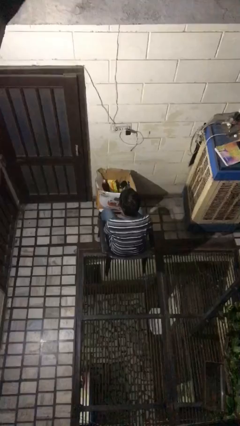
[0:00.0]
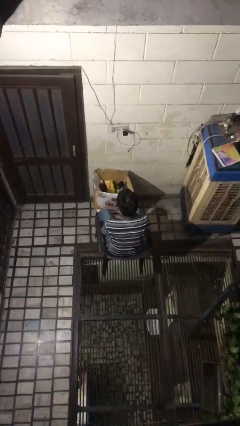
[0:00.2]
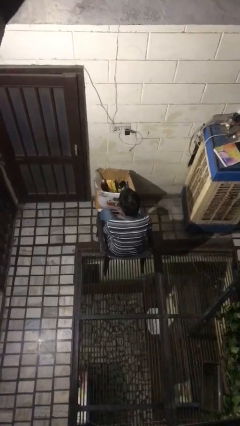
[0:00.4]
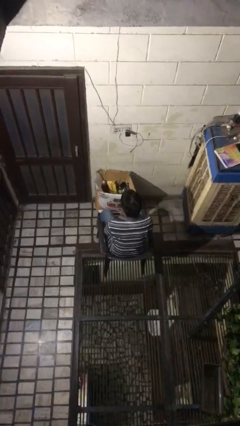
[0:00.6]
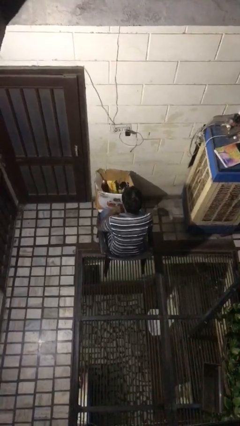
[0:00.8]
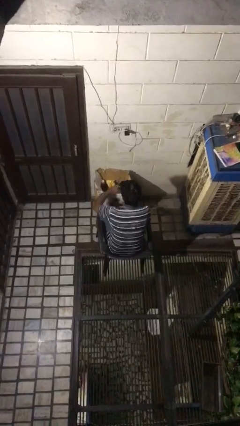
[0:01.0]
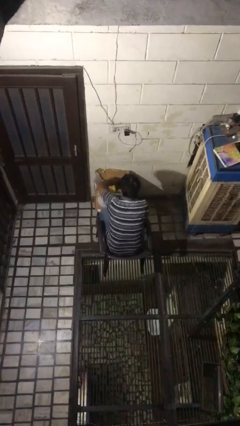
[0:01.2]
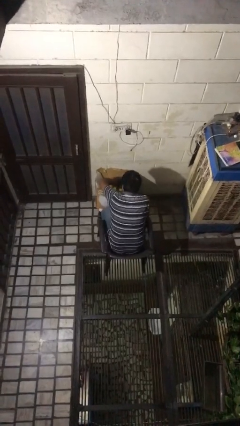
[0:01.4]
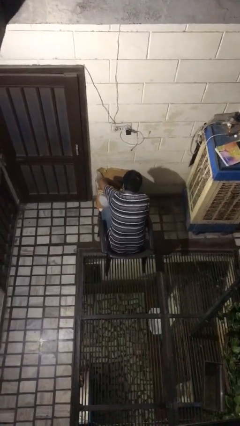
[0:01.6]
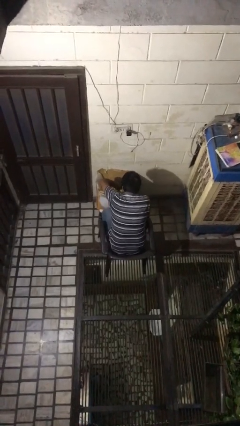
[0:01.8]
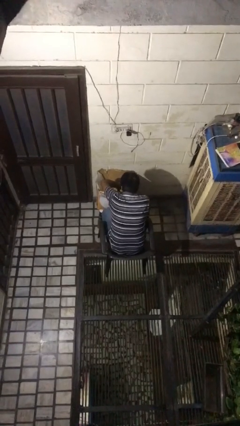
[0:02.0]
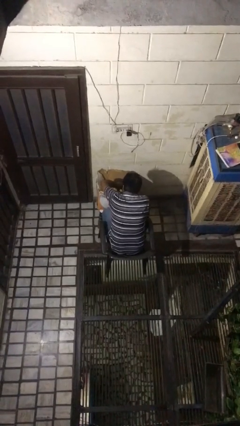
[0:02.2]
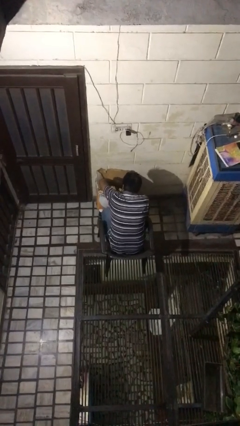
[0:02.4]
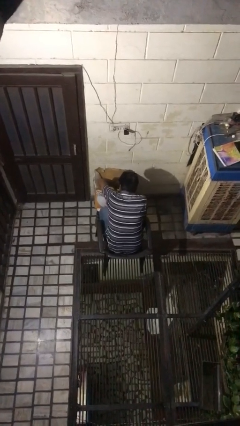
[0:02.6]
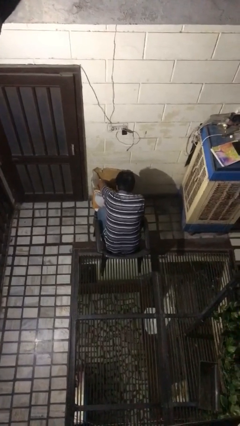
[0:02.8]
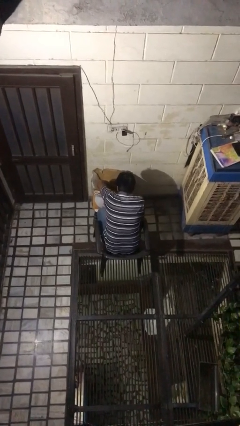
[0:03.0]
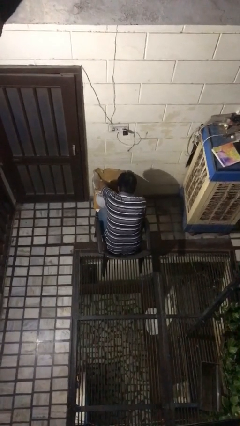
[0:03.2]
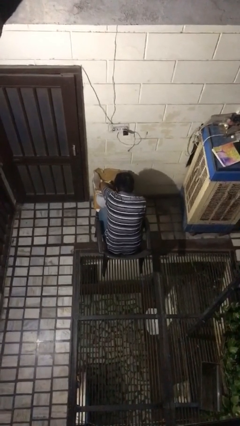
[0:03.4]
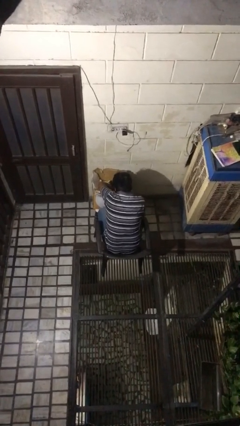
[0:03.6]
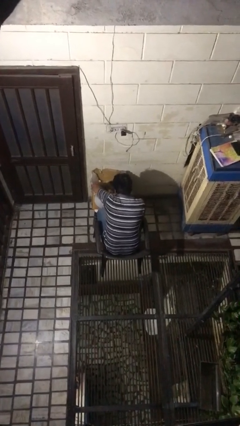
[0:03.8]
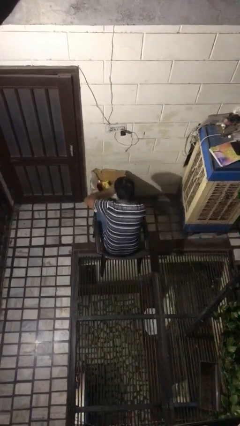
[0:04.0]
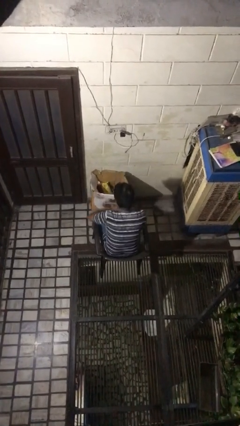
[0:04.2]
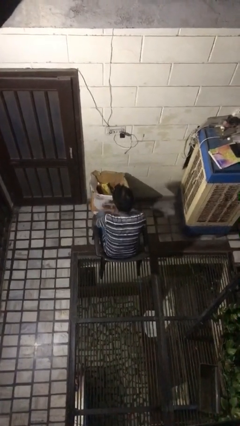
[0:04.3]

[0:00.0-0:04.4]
person searches in box

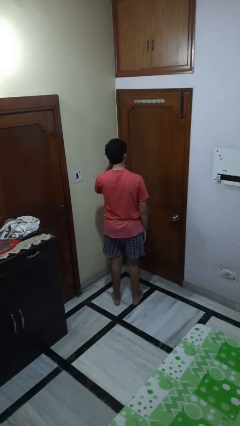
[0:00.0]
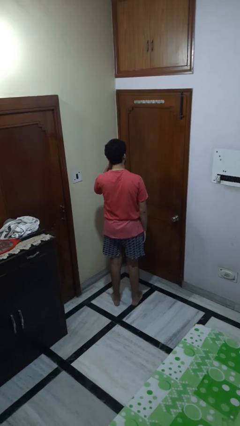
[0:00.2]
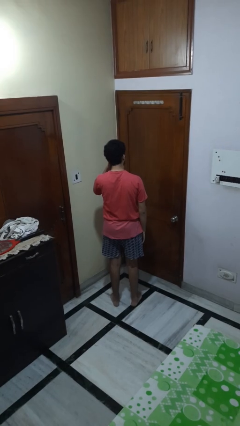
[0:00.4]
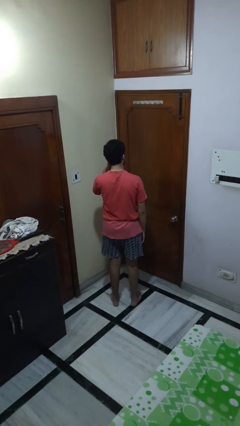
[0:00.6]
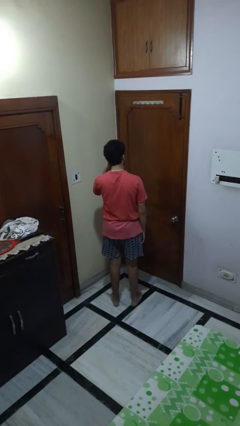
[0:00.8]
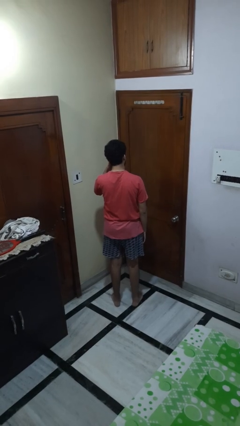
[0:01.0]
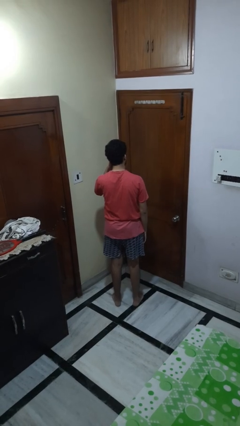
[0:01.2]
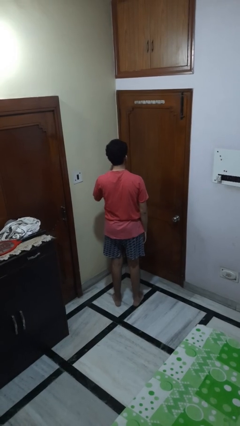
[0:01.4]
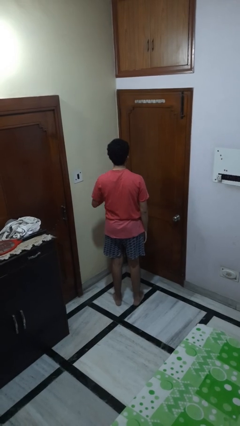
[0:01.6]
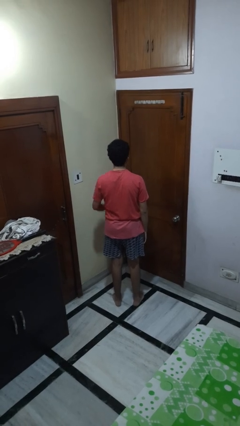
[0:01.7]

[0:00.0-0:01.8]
person gestures call me

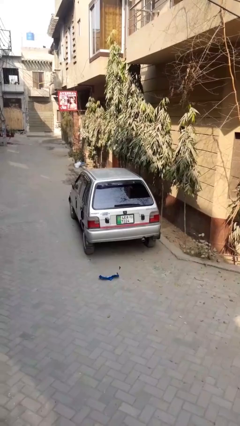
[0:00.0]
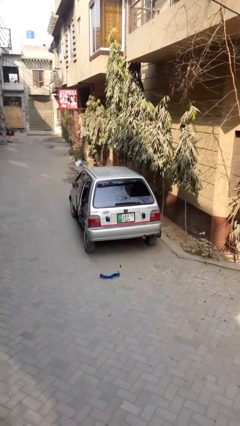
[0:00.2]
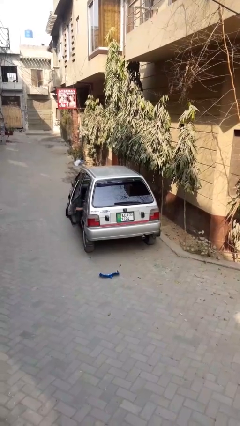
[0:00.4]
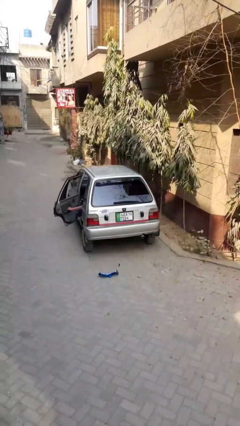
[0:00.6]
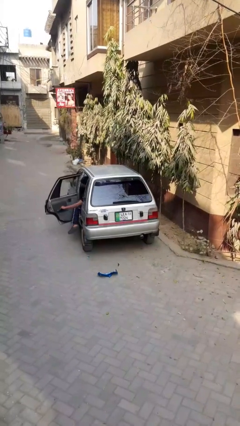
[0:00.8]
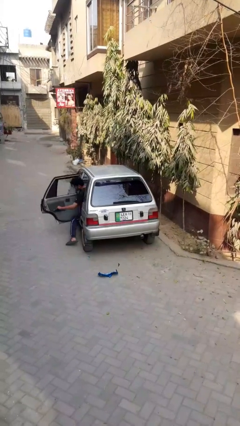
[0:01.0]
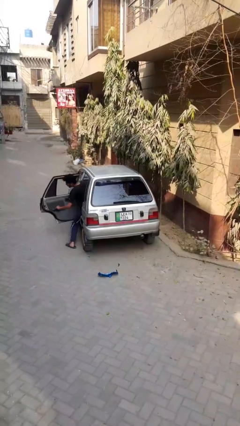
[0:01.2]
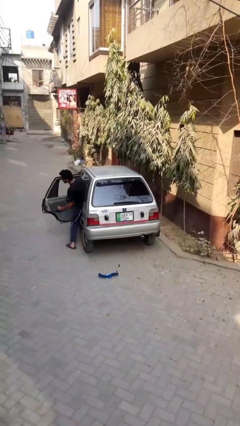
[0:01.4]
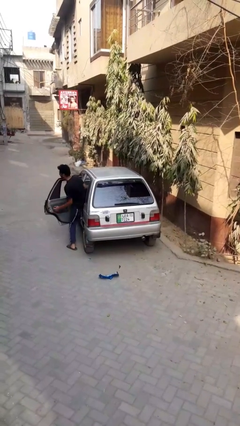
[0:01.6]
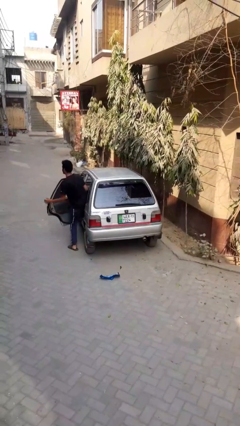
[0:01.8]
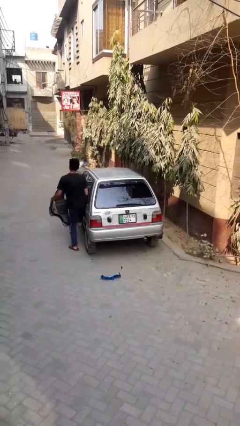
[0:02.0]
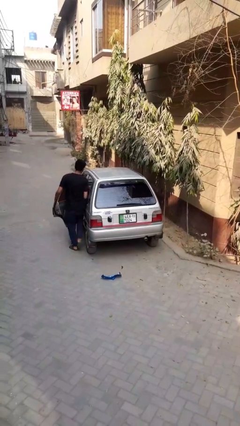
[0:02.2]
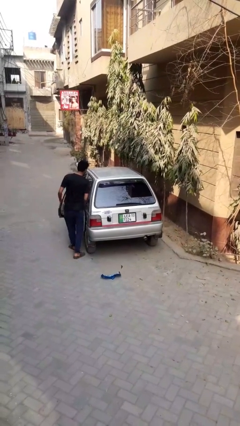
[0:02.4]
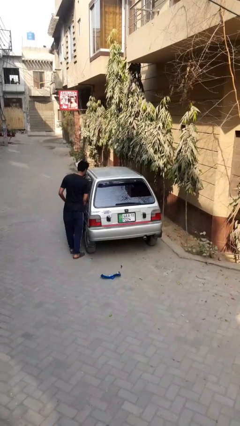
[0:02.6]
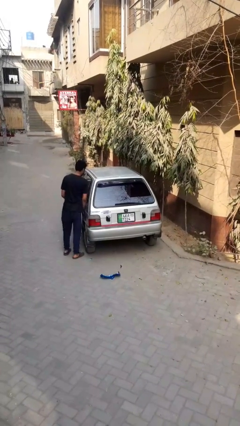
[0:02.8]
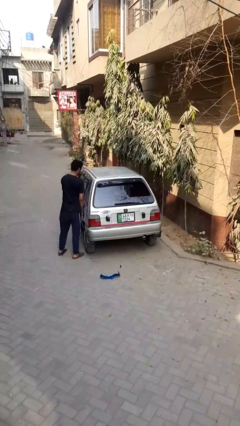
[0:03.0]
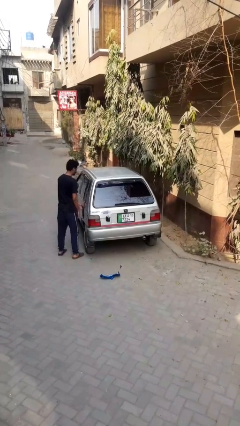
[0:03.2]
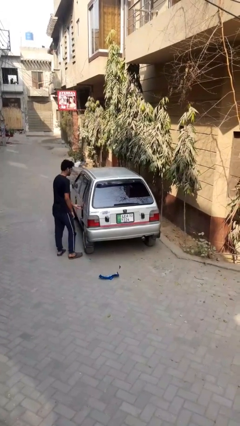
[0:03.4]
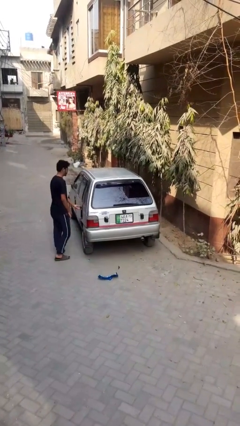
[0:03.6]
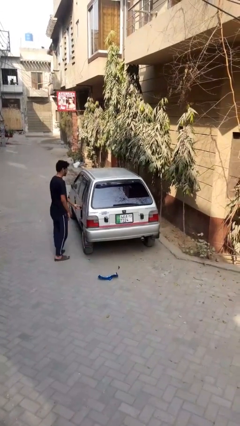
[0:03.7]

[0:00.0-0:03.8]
car drops off person

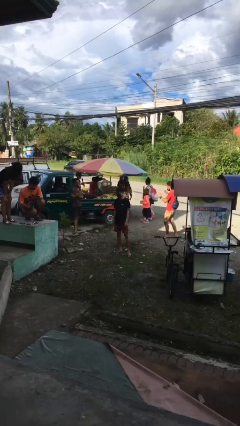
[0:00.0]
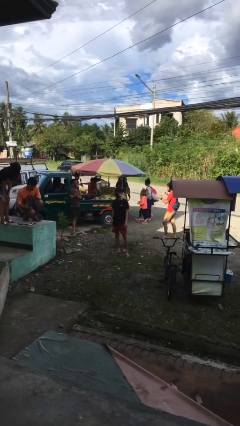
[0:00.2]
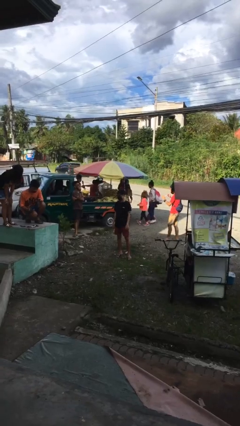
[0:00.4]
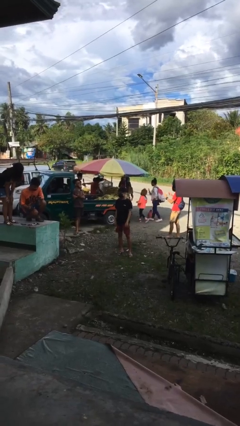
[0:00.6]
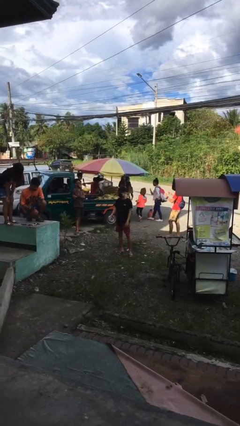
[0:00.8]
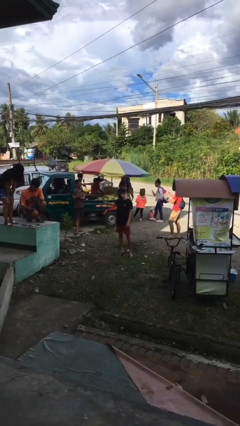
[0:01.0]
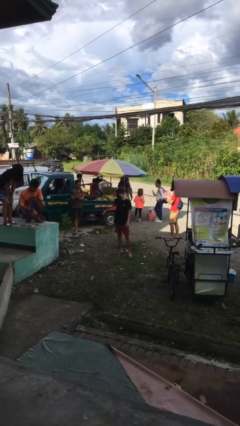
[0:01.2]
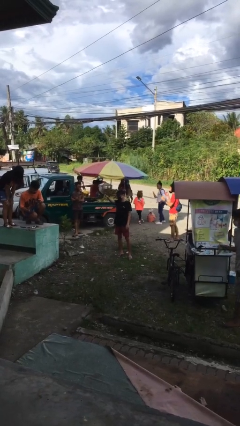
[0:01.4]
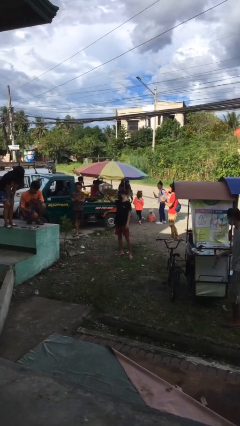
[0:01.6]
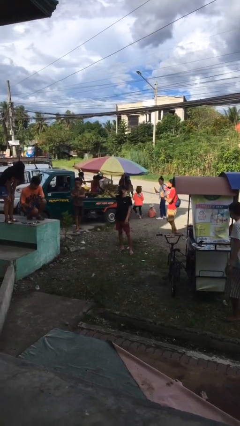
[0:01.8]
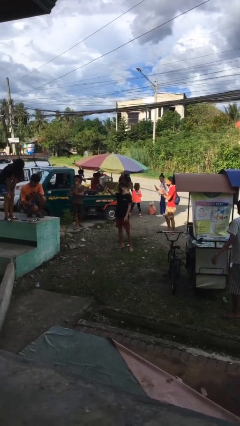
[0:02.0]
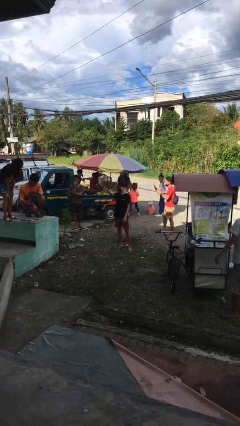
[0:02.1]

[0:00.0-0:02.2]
person points at person

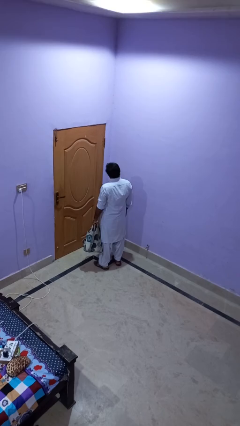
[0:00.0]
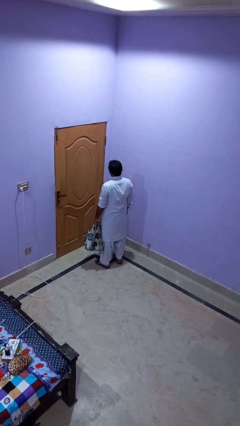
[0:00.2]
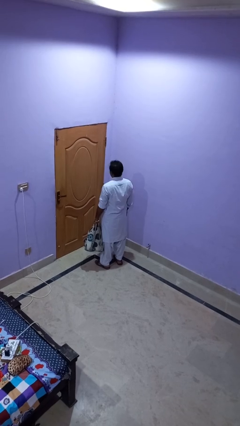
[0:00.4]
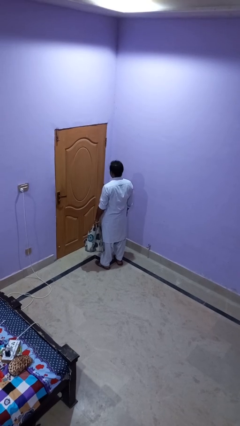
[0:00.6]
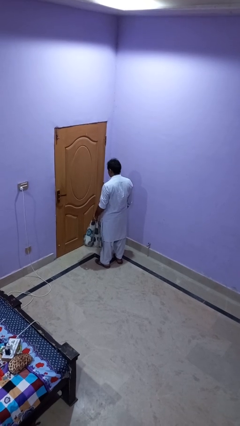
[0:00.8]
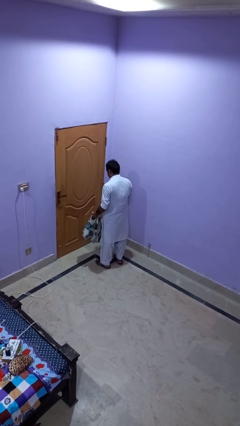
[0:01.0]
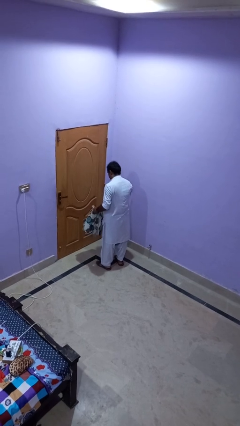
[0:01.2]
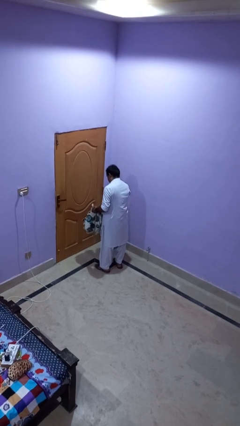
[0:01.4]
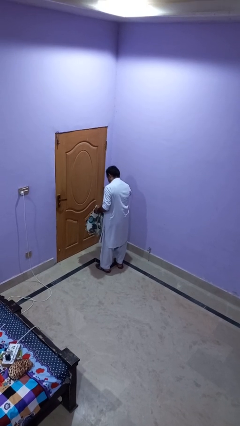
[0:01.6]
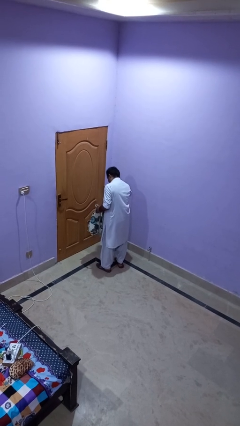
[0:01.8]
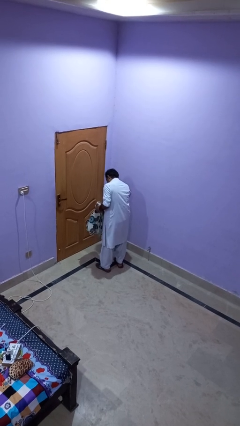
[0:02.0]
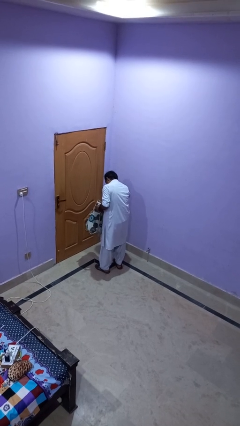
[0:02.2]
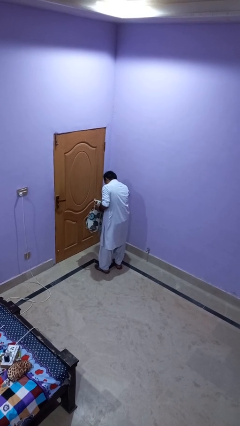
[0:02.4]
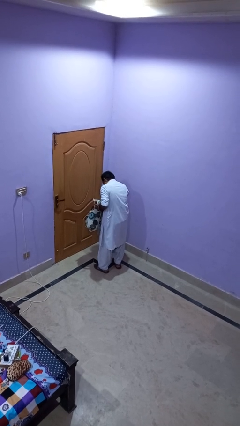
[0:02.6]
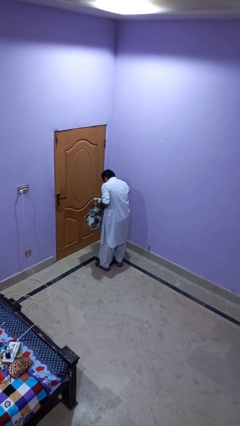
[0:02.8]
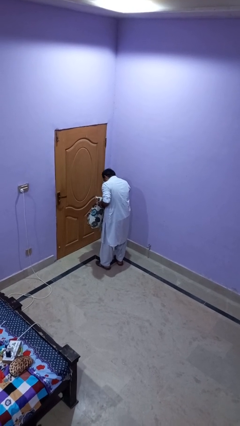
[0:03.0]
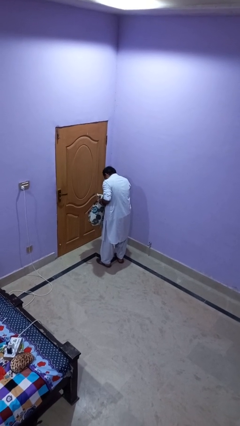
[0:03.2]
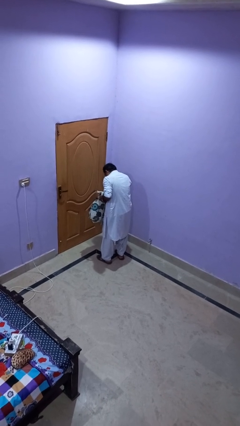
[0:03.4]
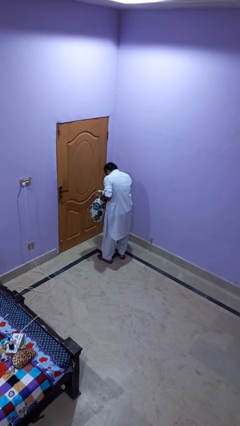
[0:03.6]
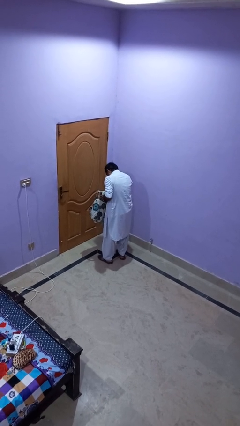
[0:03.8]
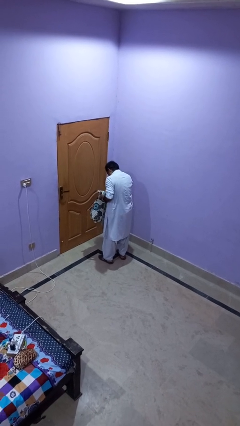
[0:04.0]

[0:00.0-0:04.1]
person searches in backpack

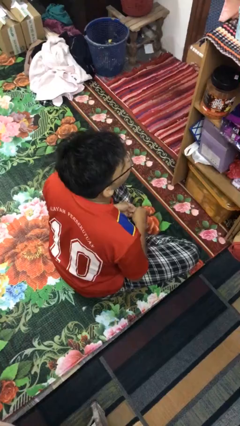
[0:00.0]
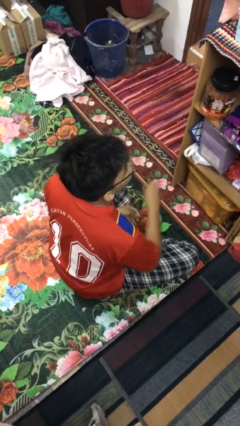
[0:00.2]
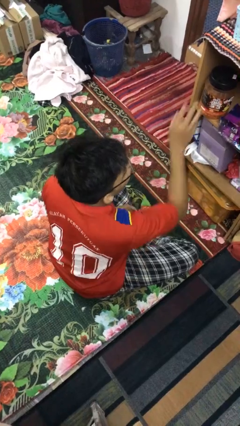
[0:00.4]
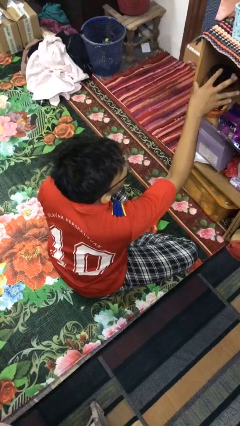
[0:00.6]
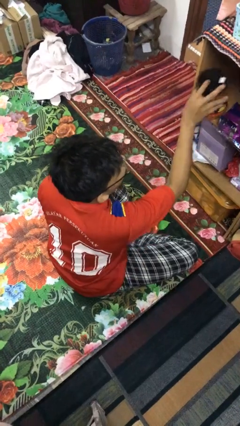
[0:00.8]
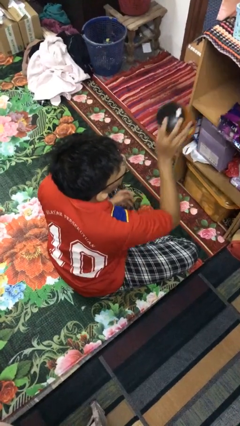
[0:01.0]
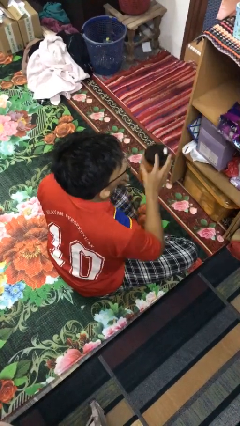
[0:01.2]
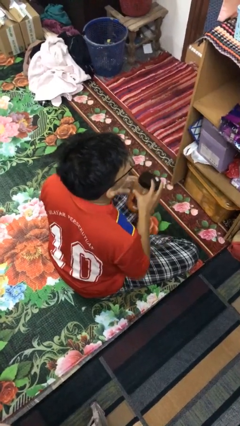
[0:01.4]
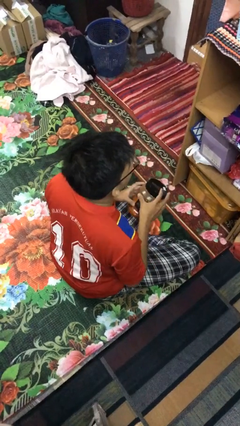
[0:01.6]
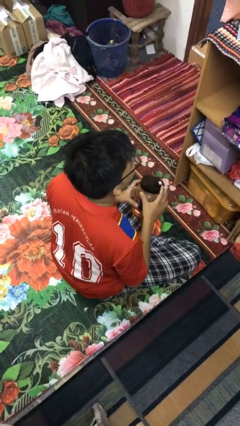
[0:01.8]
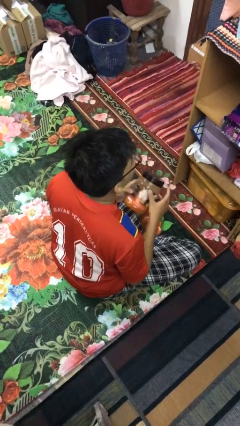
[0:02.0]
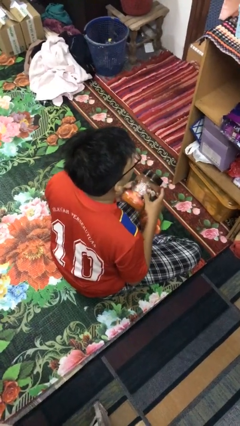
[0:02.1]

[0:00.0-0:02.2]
person picks up object from cabinet
